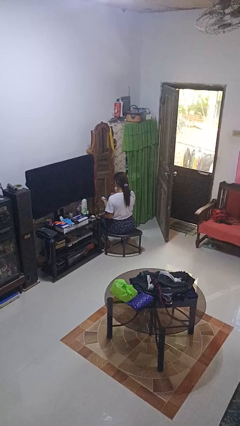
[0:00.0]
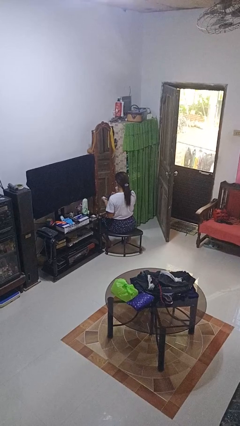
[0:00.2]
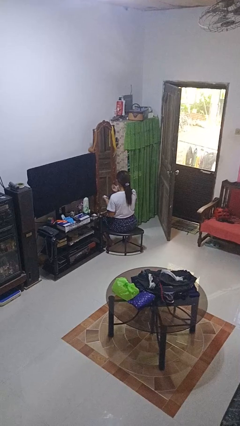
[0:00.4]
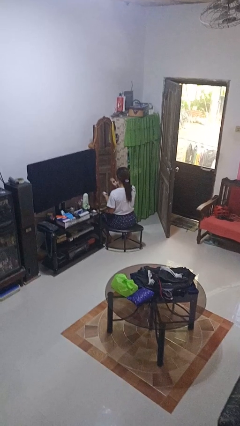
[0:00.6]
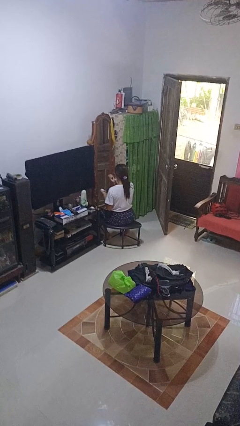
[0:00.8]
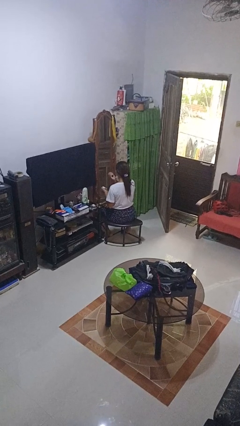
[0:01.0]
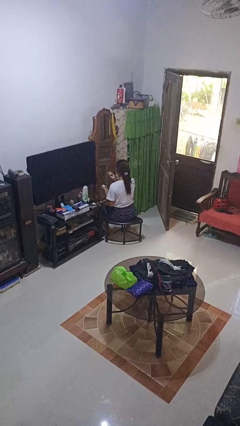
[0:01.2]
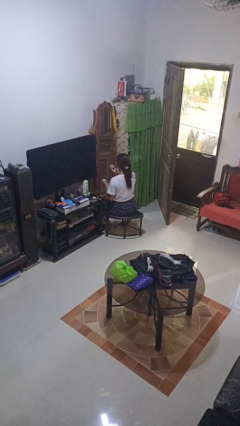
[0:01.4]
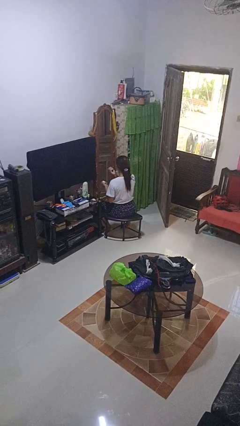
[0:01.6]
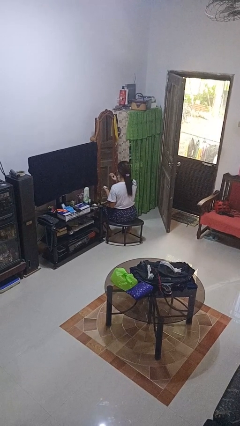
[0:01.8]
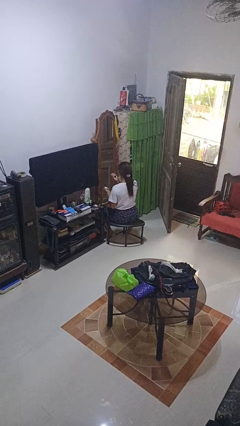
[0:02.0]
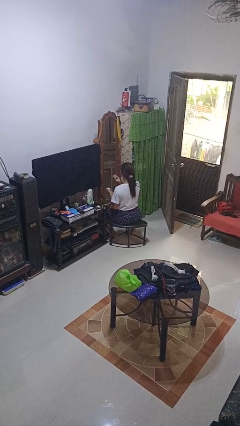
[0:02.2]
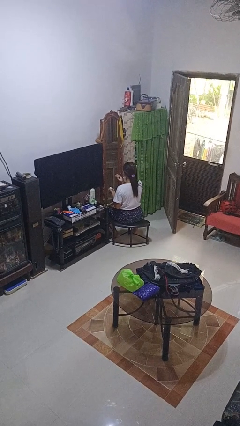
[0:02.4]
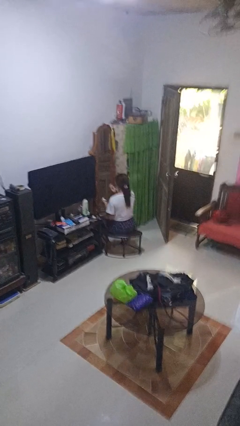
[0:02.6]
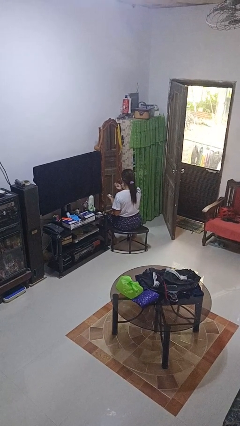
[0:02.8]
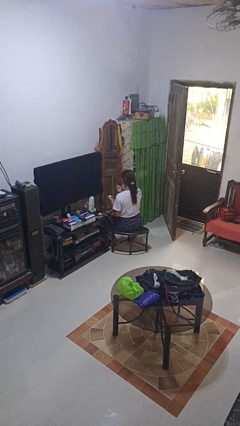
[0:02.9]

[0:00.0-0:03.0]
person applies eye makeup

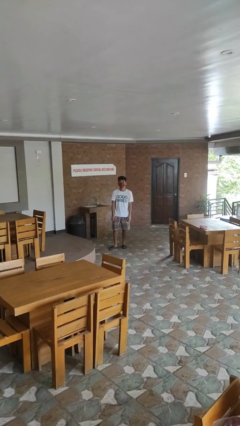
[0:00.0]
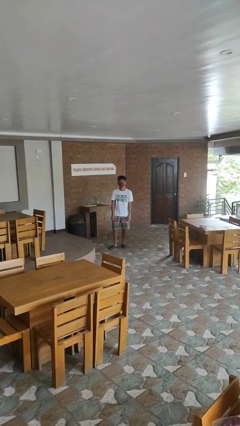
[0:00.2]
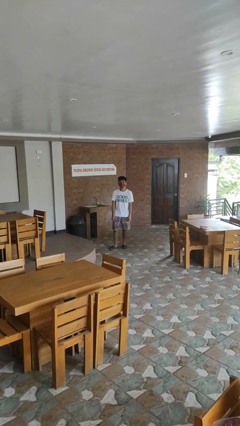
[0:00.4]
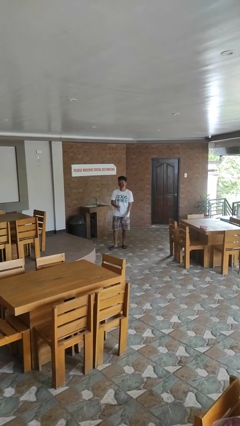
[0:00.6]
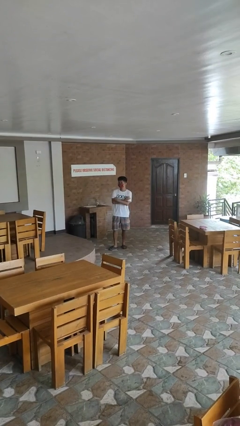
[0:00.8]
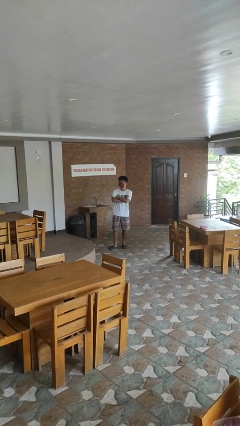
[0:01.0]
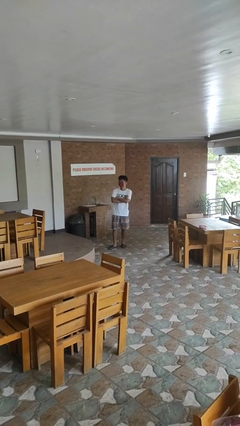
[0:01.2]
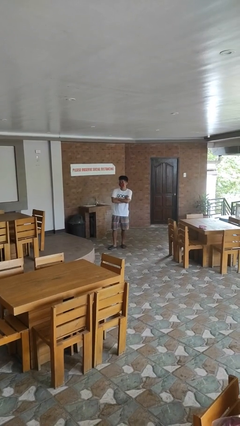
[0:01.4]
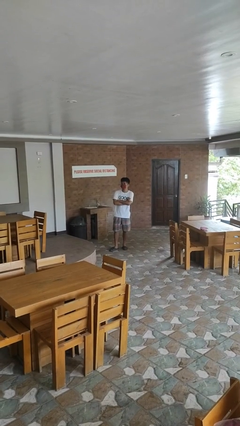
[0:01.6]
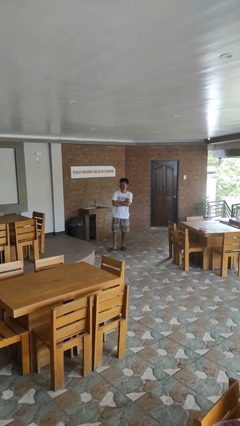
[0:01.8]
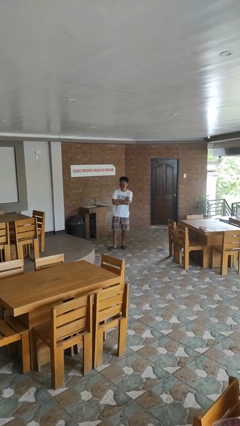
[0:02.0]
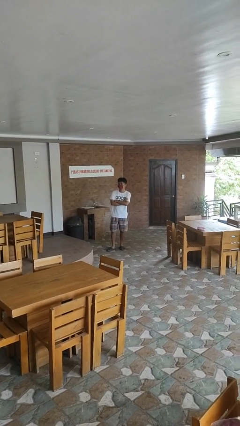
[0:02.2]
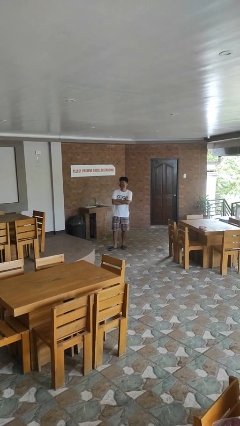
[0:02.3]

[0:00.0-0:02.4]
person brushes teeth

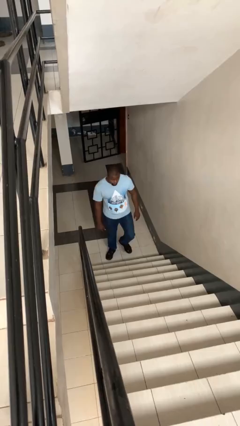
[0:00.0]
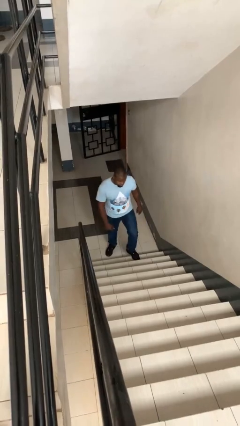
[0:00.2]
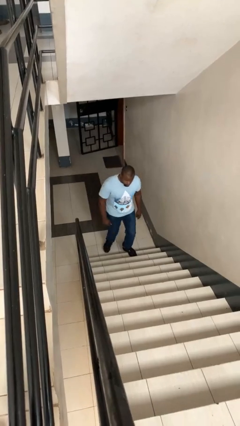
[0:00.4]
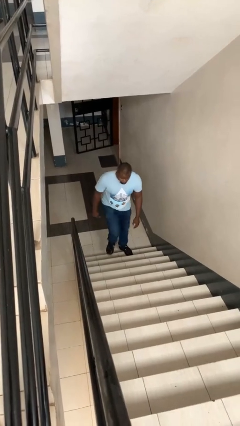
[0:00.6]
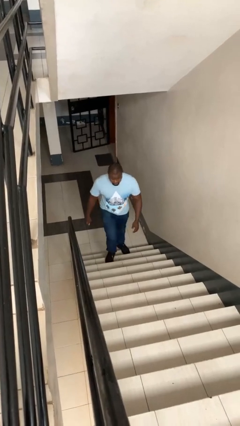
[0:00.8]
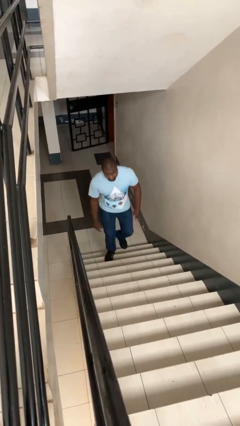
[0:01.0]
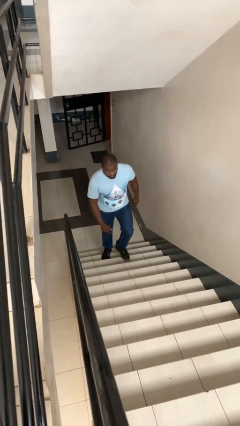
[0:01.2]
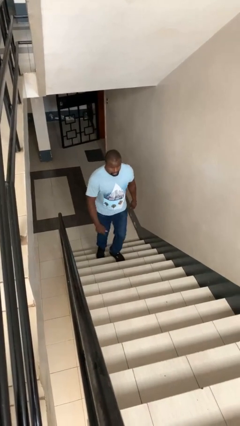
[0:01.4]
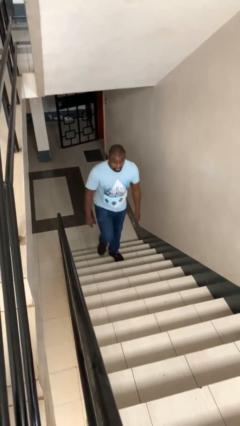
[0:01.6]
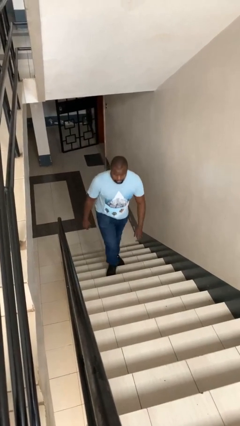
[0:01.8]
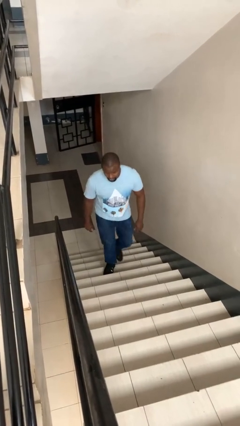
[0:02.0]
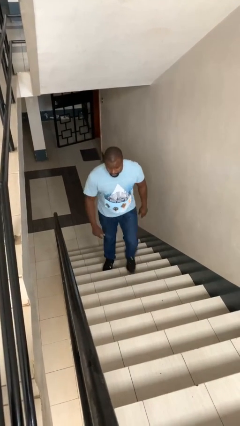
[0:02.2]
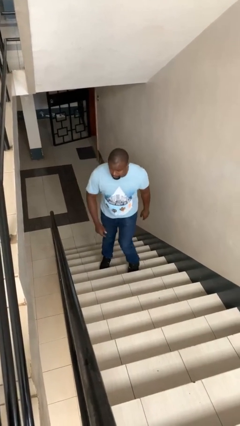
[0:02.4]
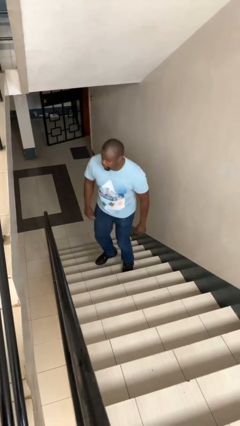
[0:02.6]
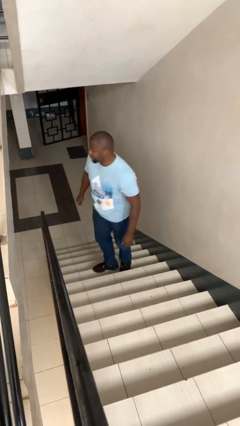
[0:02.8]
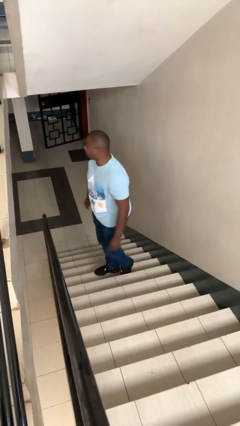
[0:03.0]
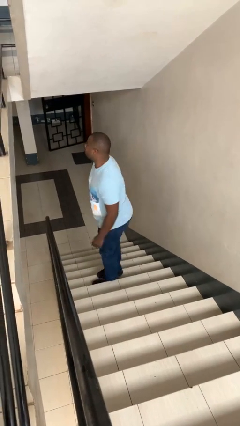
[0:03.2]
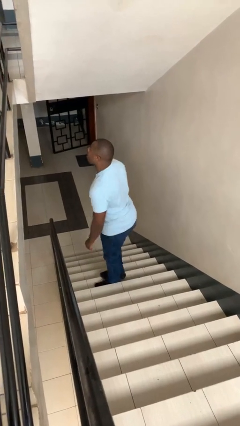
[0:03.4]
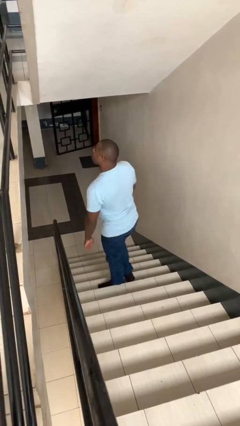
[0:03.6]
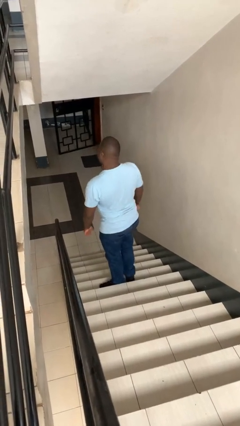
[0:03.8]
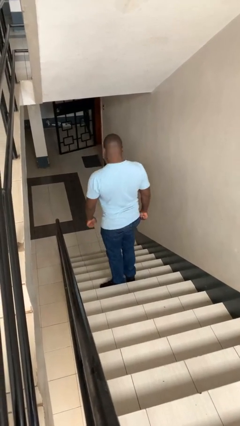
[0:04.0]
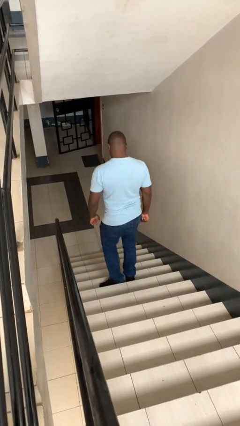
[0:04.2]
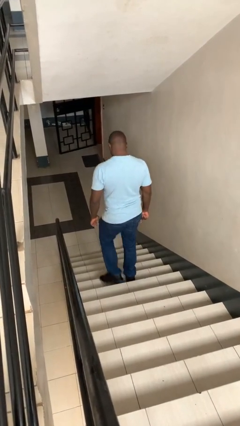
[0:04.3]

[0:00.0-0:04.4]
person climbs up stairs

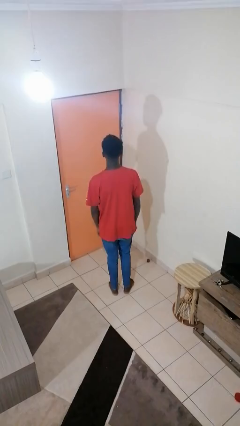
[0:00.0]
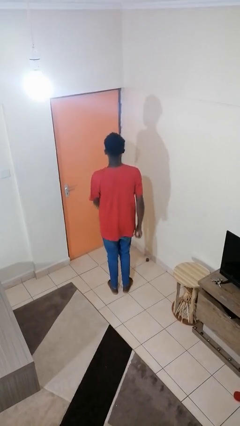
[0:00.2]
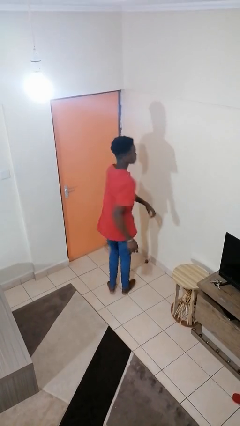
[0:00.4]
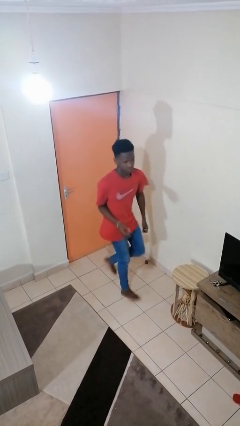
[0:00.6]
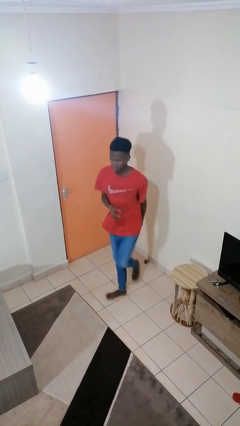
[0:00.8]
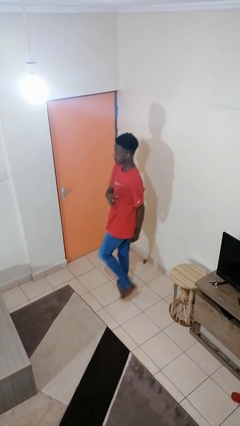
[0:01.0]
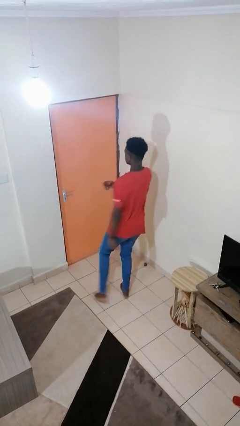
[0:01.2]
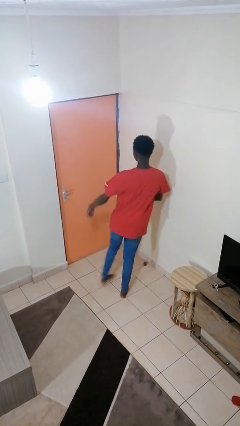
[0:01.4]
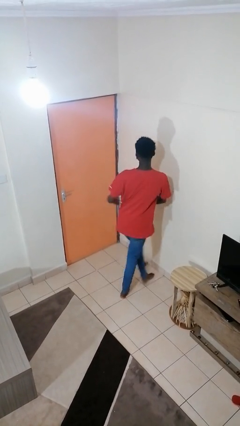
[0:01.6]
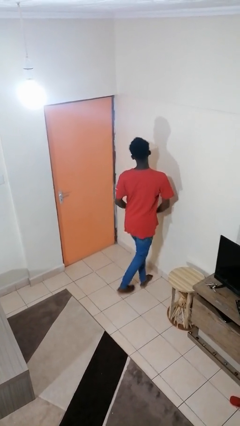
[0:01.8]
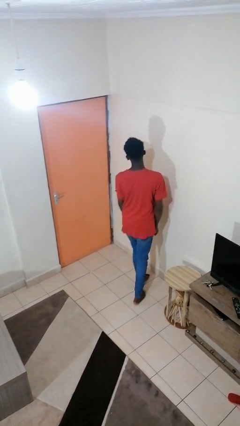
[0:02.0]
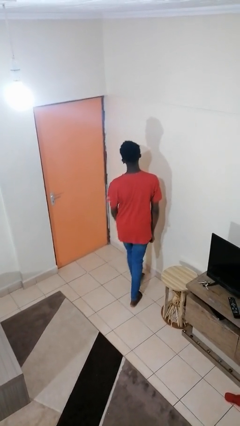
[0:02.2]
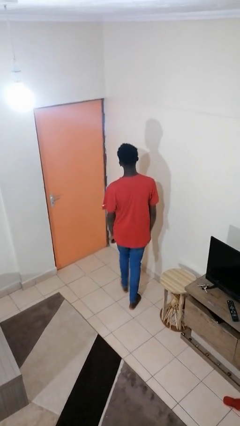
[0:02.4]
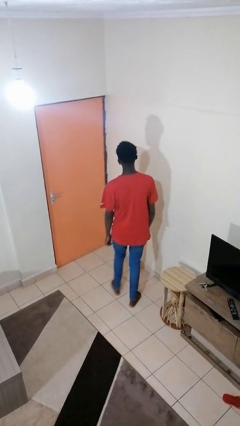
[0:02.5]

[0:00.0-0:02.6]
person twirls

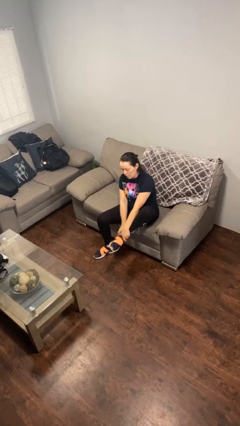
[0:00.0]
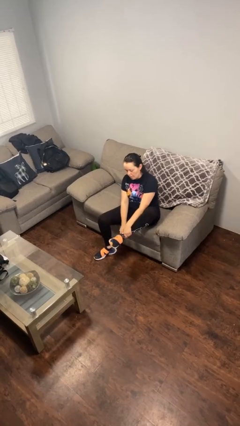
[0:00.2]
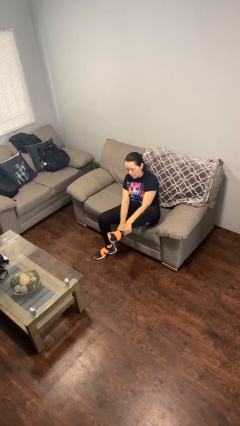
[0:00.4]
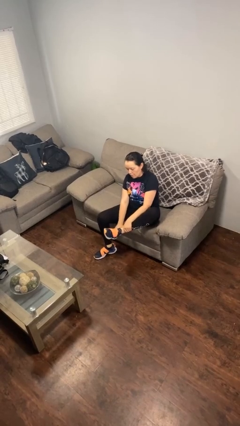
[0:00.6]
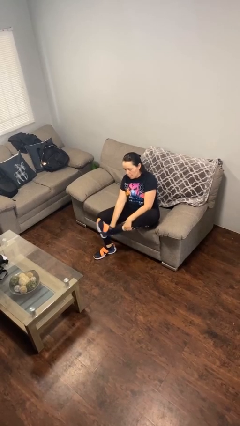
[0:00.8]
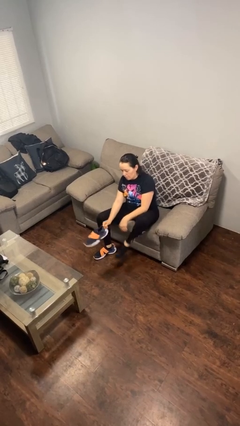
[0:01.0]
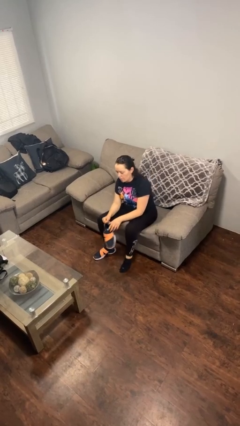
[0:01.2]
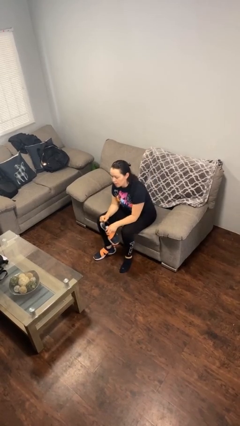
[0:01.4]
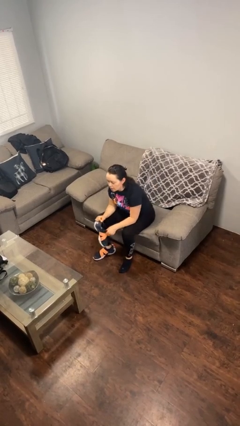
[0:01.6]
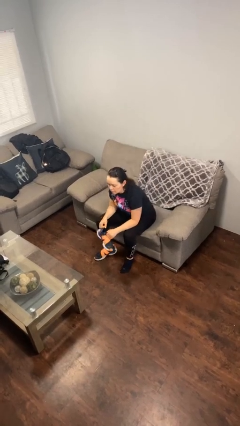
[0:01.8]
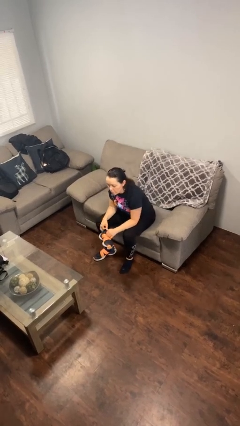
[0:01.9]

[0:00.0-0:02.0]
person takes off shoes

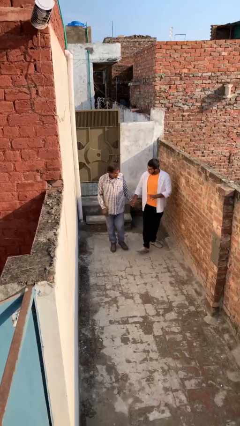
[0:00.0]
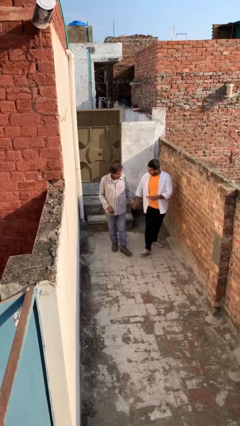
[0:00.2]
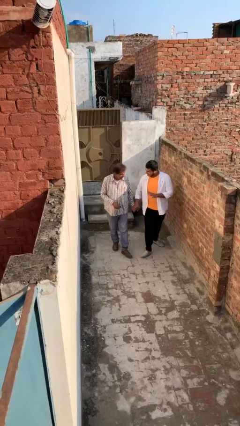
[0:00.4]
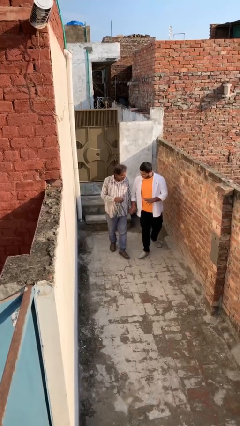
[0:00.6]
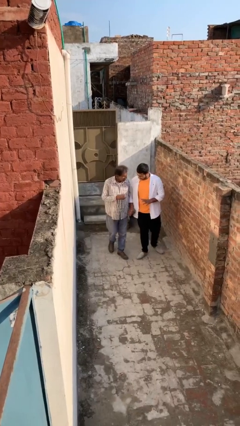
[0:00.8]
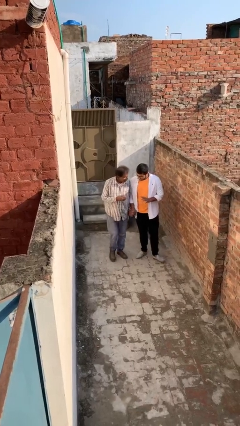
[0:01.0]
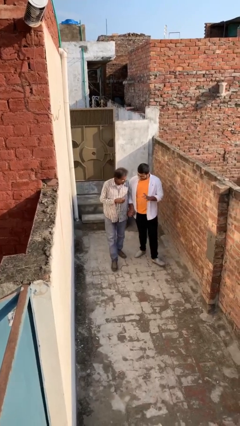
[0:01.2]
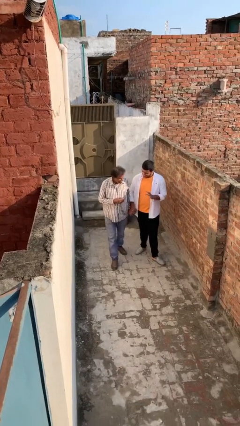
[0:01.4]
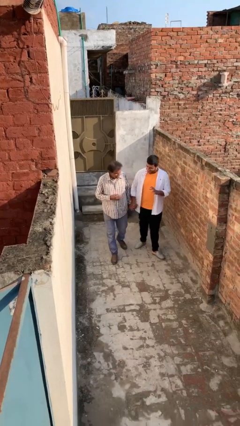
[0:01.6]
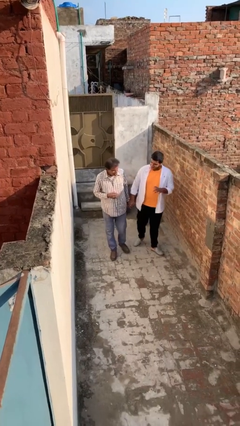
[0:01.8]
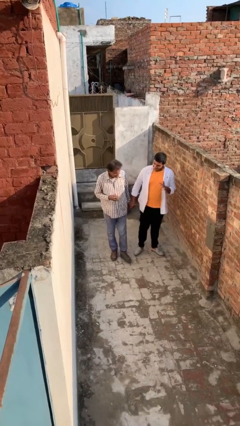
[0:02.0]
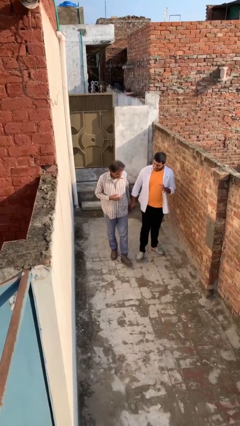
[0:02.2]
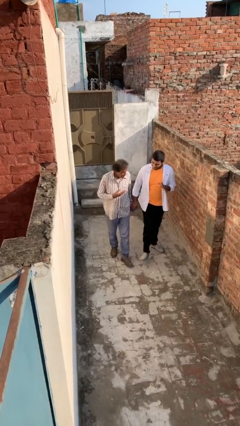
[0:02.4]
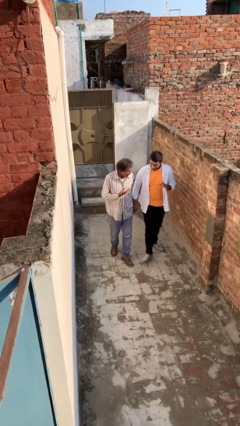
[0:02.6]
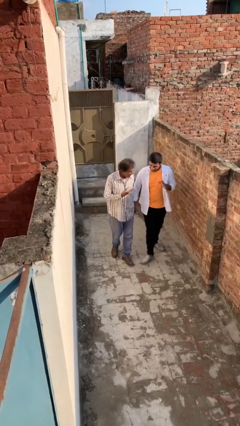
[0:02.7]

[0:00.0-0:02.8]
person holds hand
